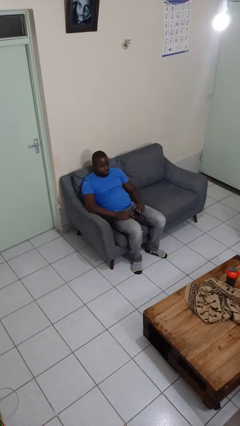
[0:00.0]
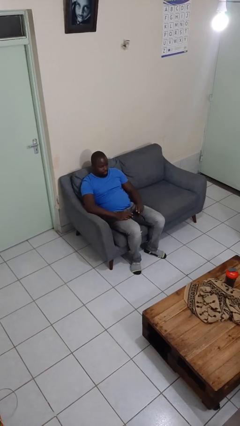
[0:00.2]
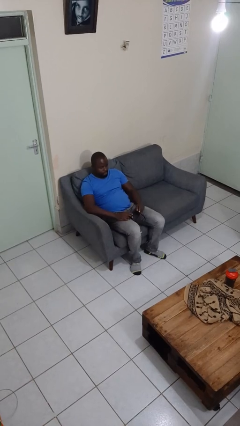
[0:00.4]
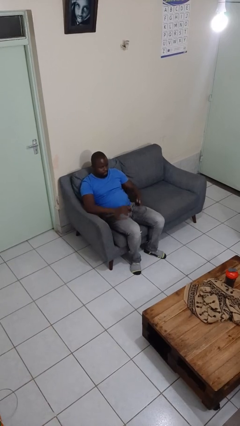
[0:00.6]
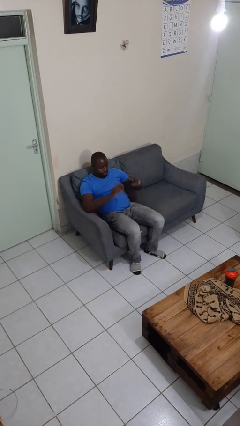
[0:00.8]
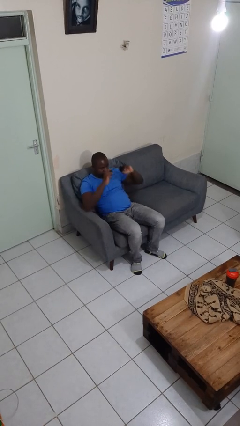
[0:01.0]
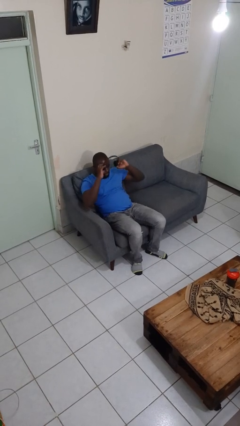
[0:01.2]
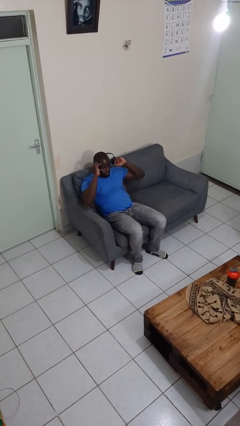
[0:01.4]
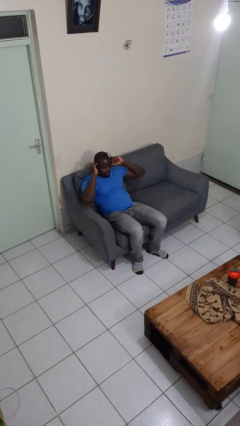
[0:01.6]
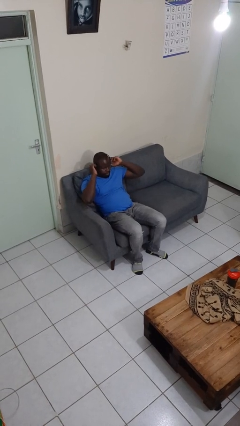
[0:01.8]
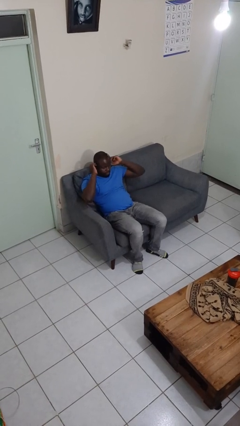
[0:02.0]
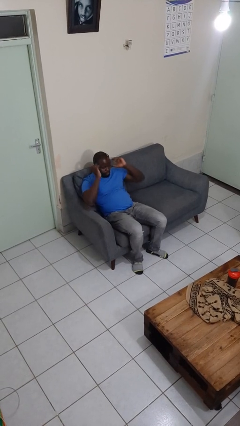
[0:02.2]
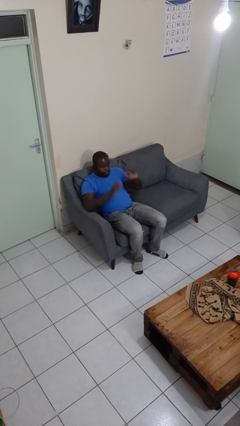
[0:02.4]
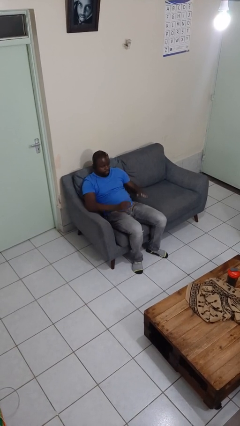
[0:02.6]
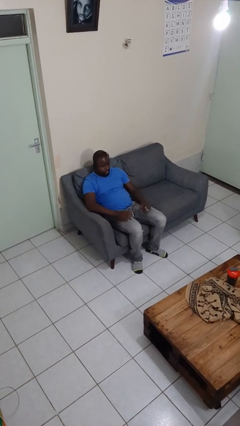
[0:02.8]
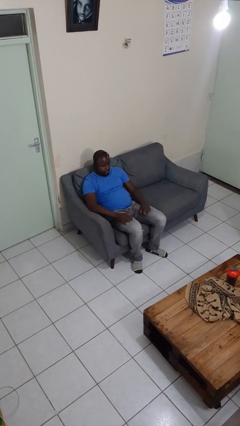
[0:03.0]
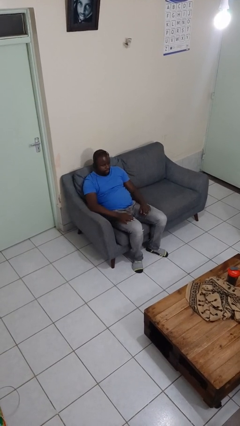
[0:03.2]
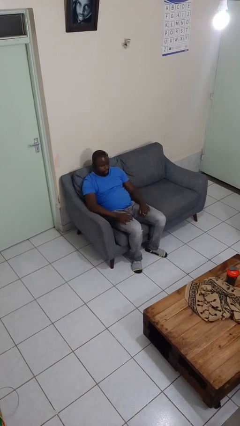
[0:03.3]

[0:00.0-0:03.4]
person puts on headphones

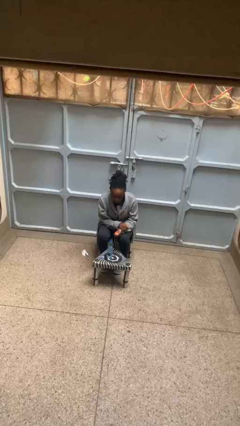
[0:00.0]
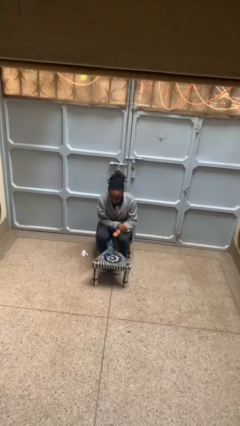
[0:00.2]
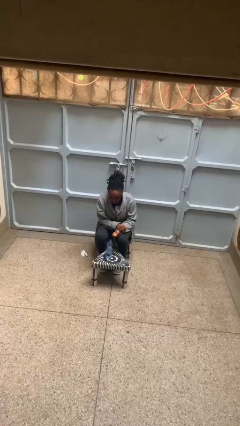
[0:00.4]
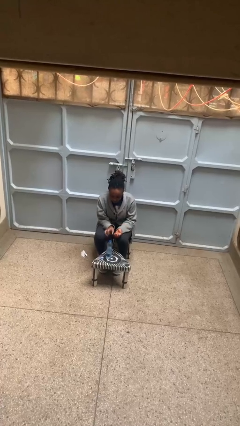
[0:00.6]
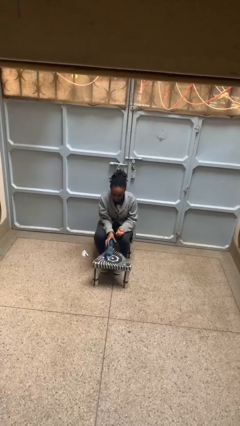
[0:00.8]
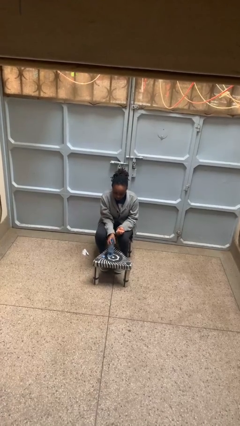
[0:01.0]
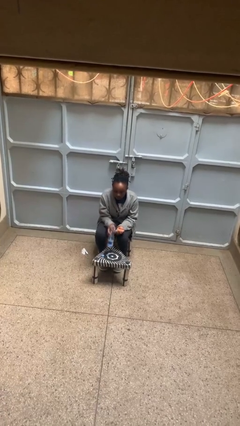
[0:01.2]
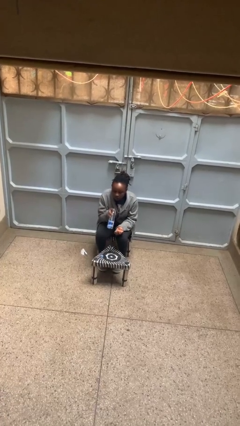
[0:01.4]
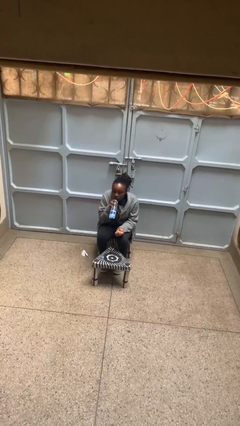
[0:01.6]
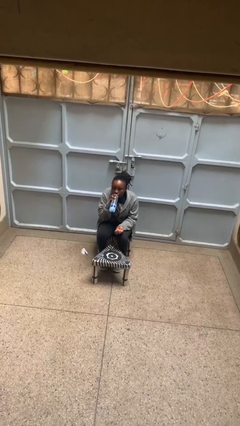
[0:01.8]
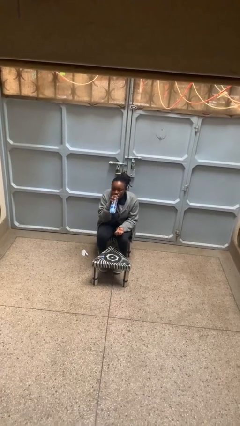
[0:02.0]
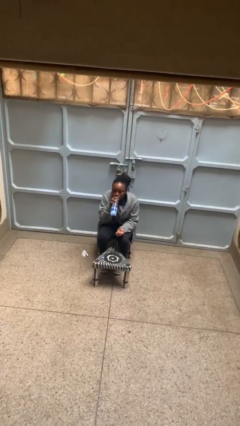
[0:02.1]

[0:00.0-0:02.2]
person drinks from cup

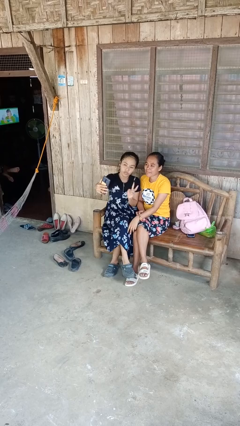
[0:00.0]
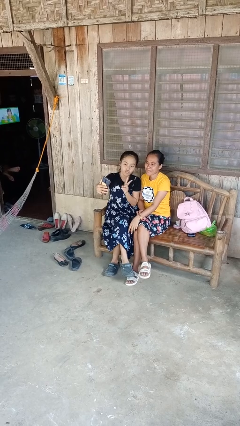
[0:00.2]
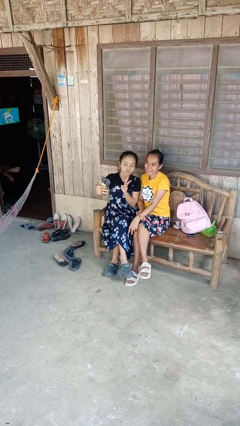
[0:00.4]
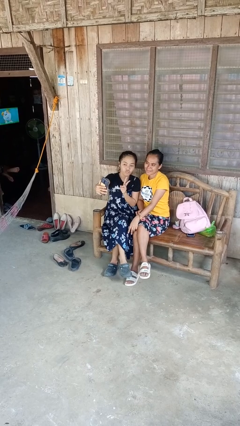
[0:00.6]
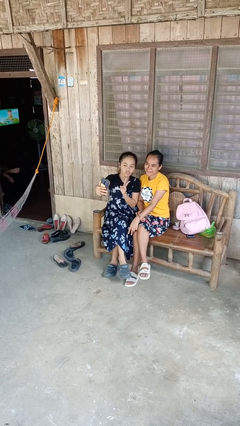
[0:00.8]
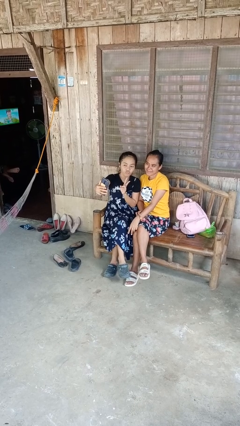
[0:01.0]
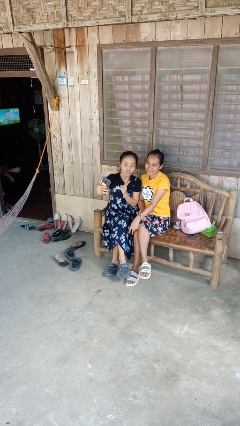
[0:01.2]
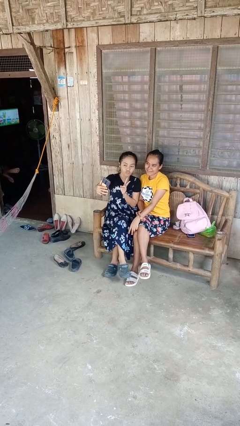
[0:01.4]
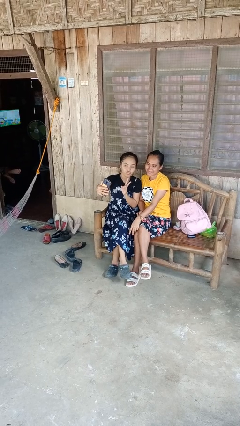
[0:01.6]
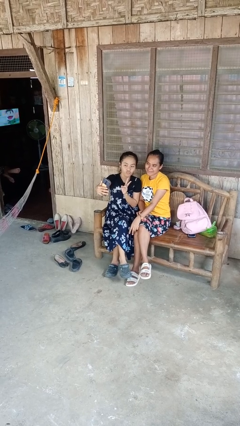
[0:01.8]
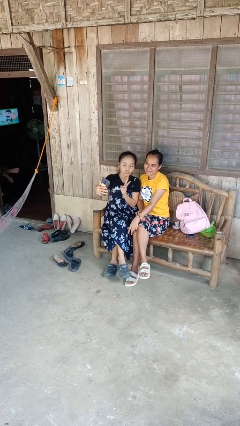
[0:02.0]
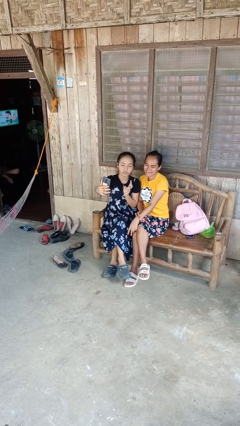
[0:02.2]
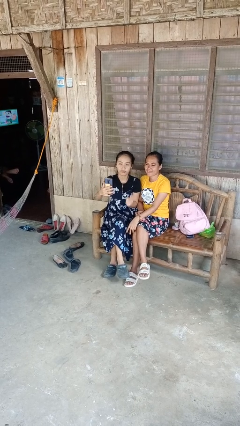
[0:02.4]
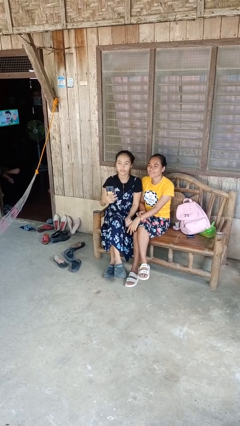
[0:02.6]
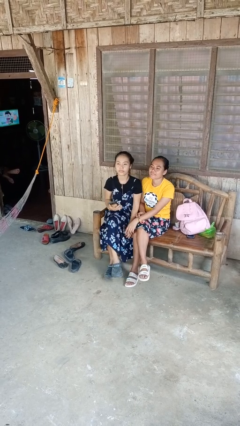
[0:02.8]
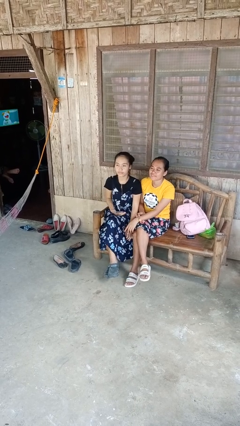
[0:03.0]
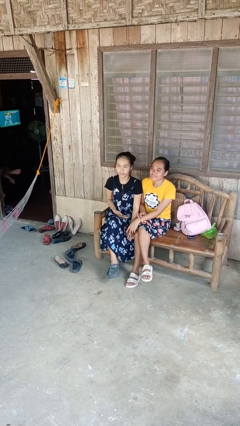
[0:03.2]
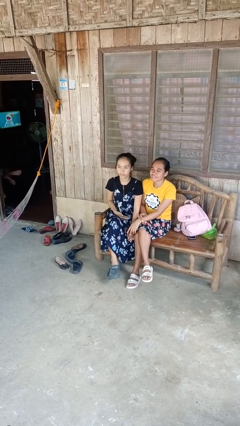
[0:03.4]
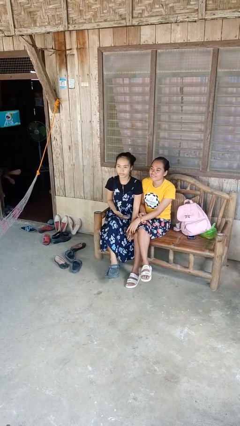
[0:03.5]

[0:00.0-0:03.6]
person takes selfie with person

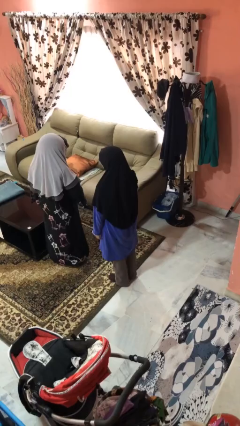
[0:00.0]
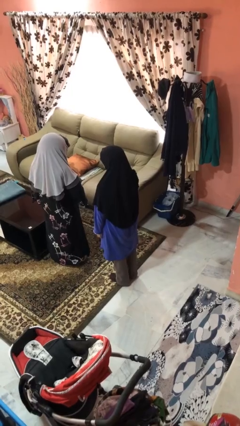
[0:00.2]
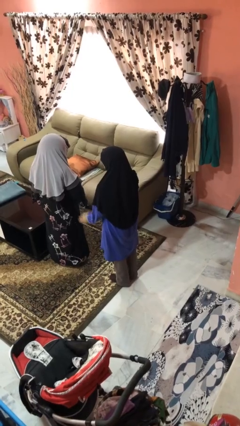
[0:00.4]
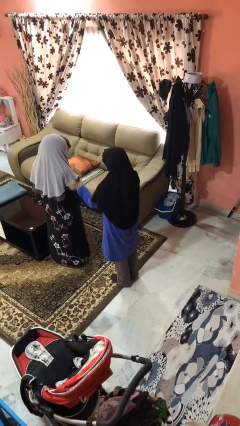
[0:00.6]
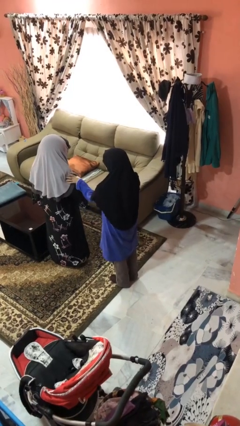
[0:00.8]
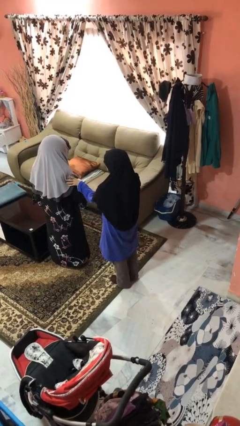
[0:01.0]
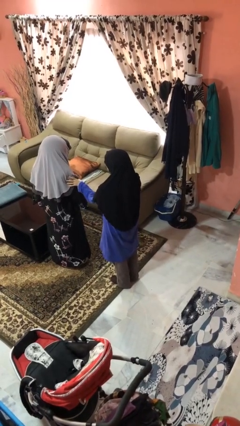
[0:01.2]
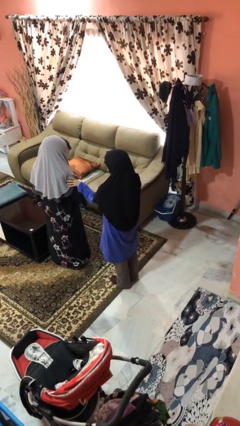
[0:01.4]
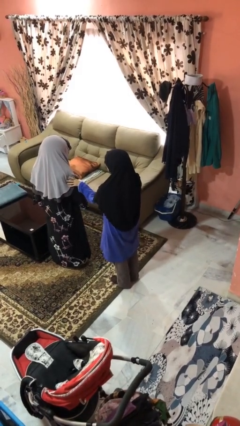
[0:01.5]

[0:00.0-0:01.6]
person grabs person by bicep

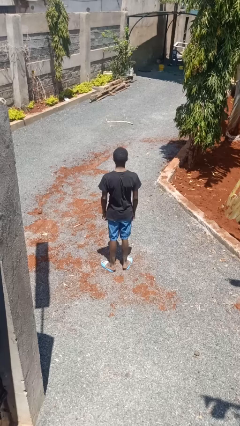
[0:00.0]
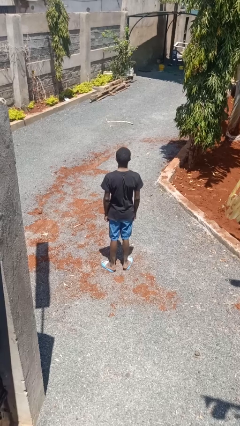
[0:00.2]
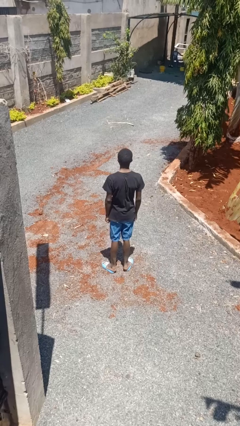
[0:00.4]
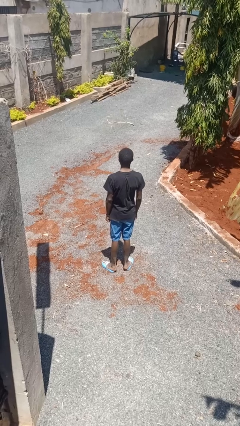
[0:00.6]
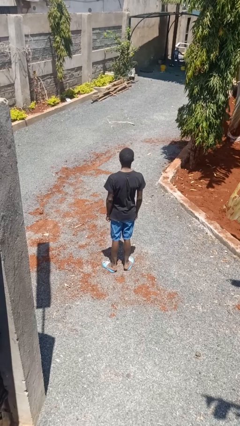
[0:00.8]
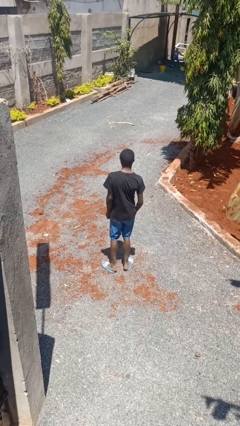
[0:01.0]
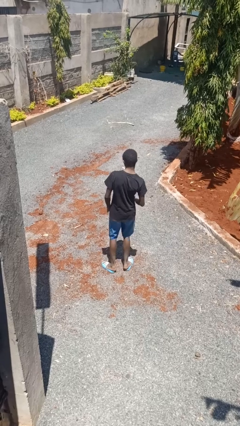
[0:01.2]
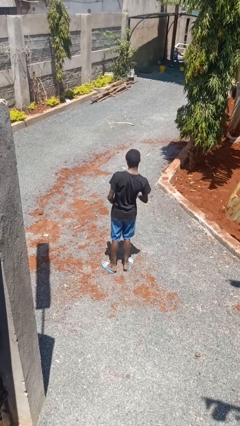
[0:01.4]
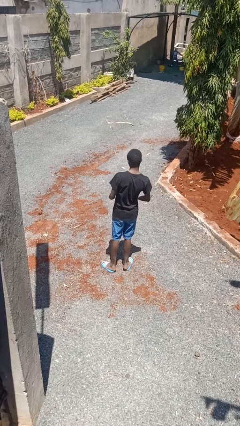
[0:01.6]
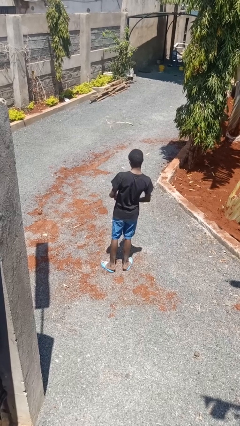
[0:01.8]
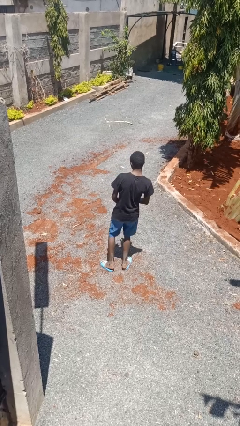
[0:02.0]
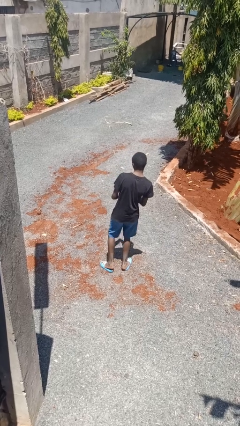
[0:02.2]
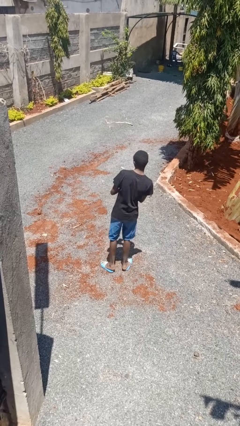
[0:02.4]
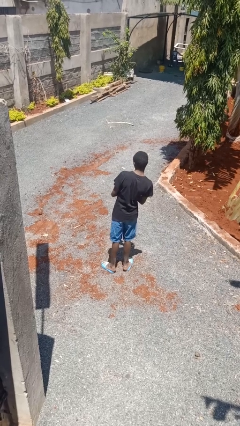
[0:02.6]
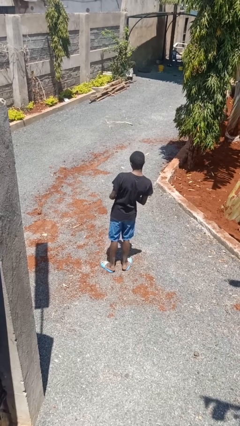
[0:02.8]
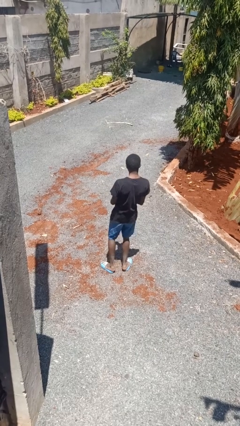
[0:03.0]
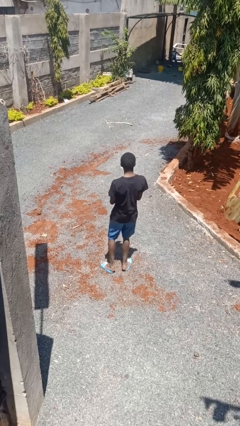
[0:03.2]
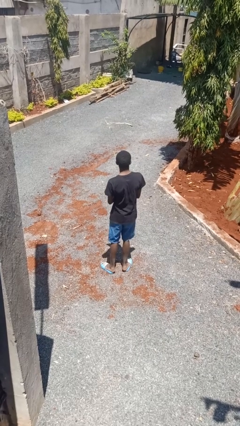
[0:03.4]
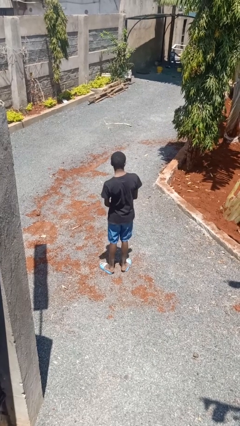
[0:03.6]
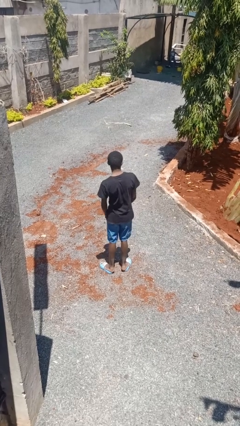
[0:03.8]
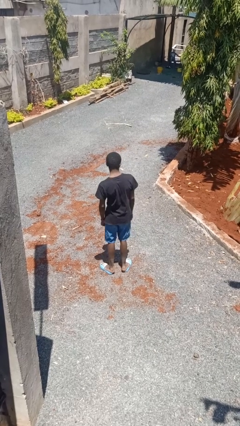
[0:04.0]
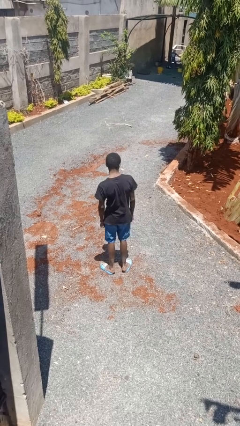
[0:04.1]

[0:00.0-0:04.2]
person dances in place

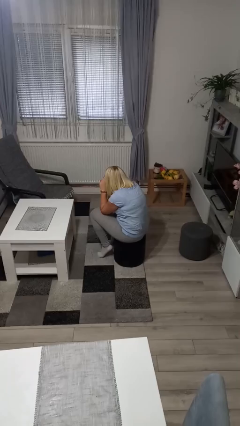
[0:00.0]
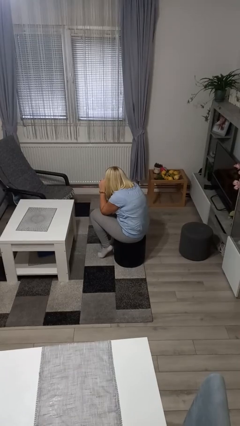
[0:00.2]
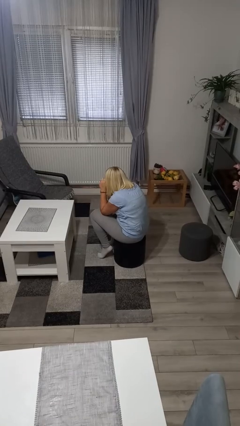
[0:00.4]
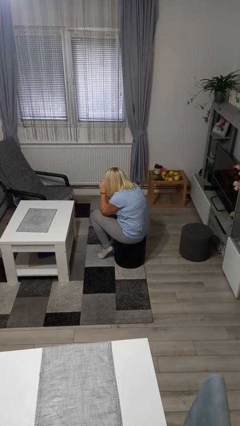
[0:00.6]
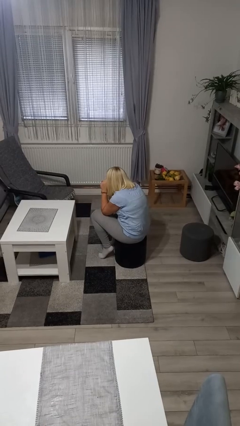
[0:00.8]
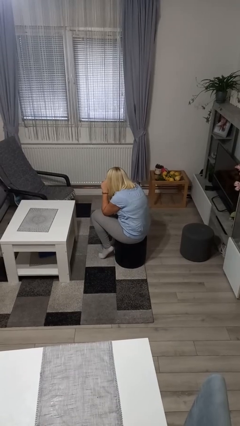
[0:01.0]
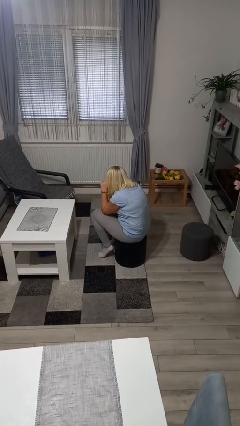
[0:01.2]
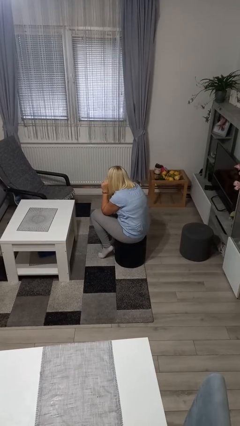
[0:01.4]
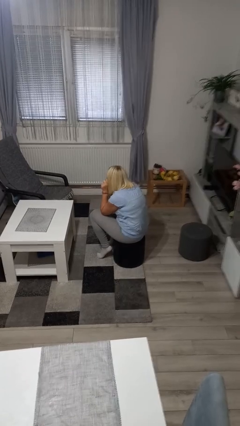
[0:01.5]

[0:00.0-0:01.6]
person rubs eyes

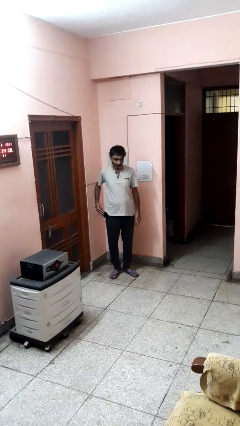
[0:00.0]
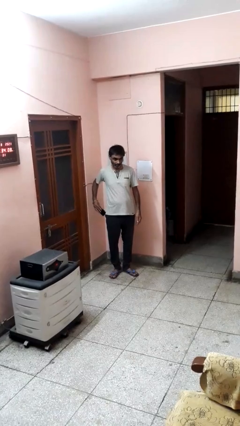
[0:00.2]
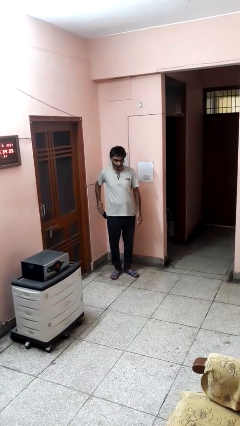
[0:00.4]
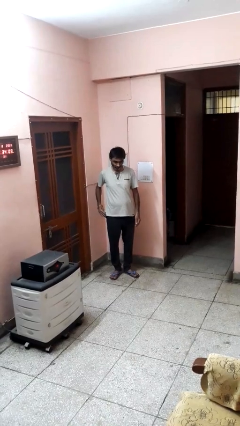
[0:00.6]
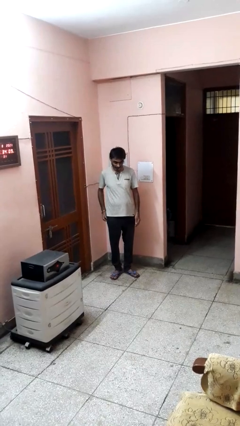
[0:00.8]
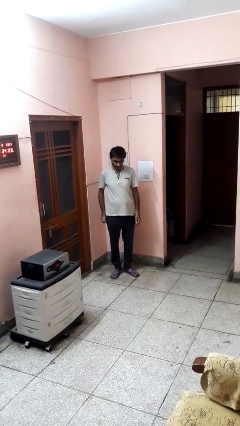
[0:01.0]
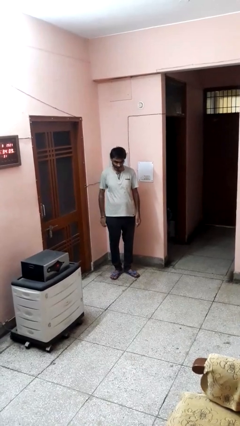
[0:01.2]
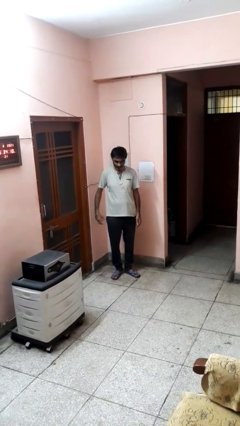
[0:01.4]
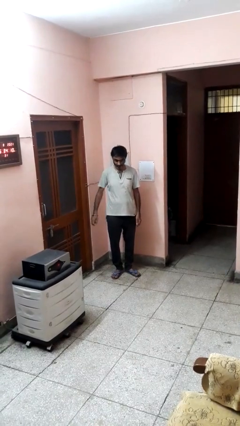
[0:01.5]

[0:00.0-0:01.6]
person puts phone into pocket
